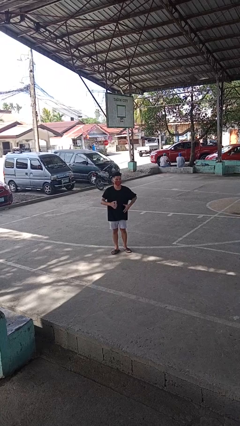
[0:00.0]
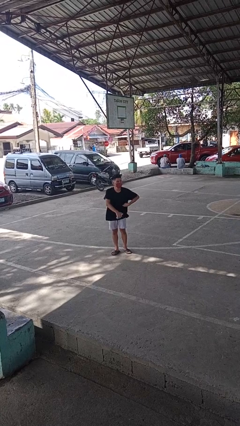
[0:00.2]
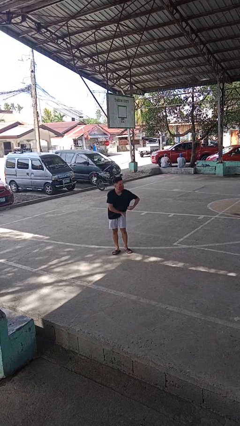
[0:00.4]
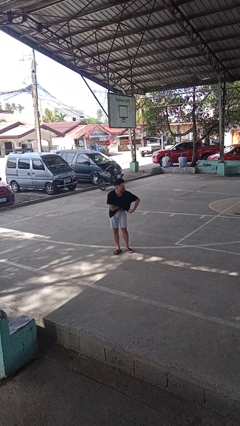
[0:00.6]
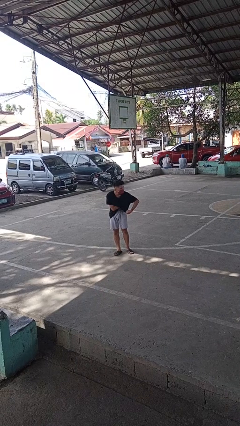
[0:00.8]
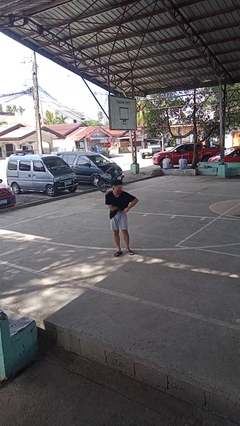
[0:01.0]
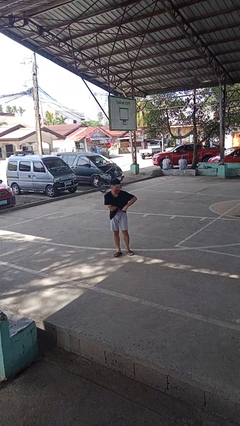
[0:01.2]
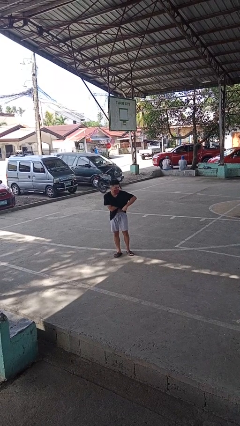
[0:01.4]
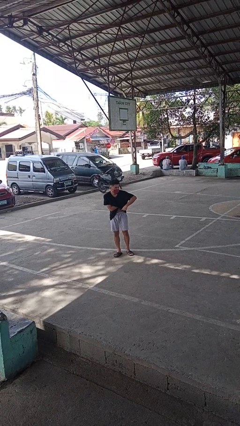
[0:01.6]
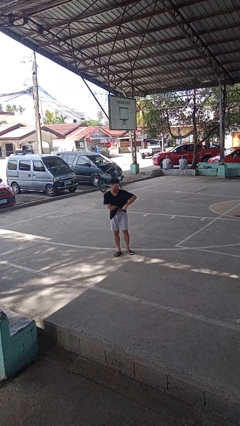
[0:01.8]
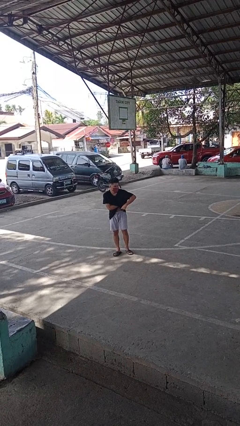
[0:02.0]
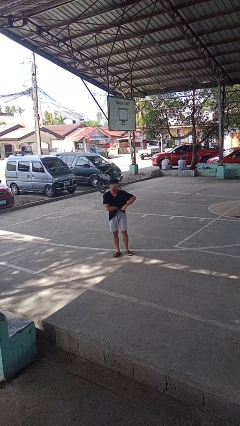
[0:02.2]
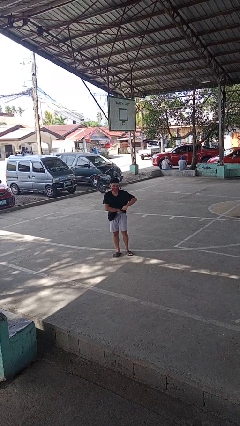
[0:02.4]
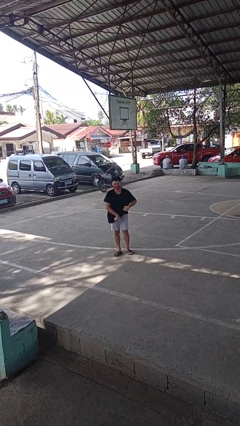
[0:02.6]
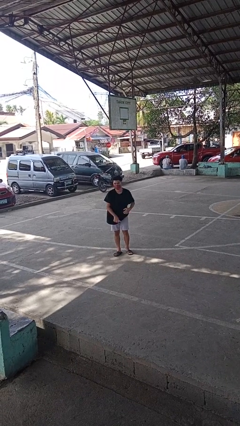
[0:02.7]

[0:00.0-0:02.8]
person applies deodorant

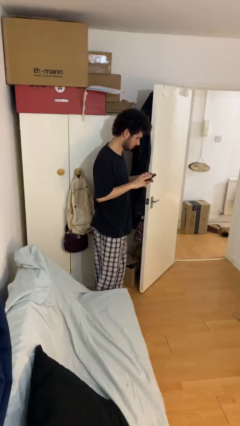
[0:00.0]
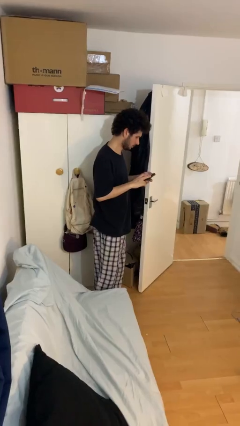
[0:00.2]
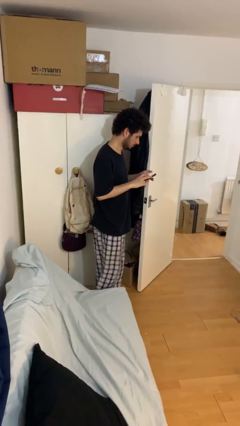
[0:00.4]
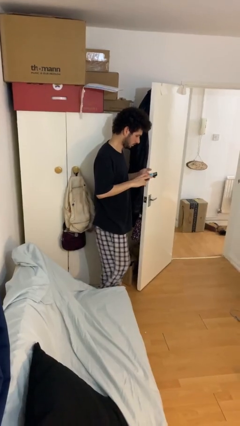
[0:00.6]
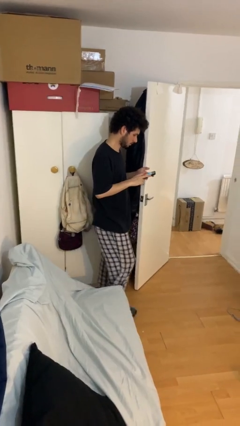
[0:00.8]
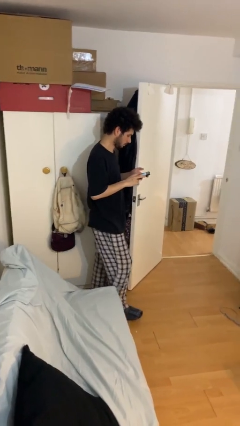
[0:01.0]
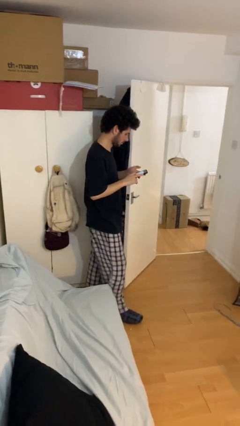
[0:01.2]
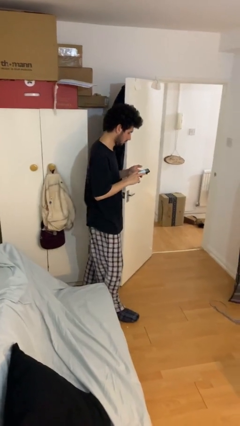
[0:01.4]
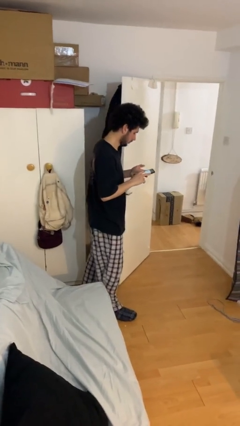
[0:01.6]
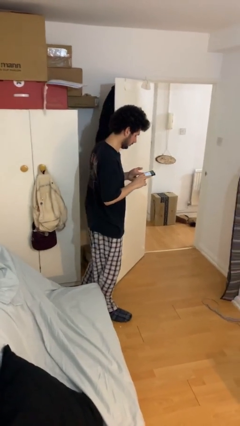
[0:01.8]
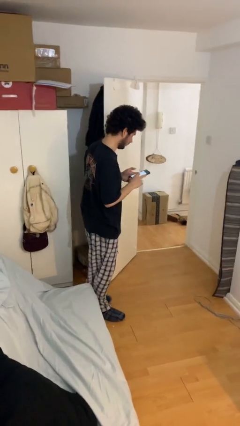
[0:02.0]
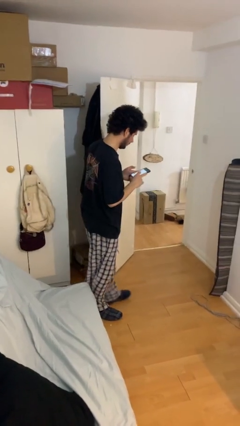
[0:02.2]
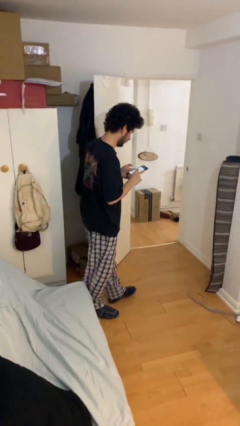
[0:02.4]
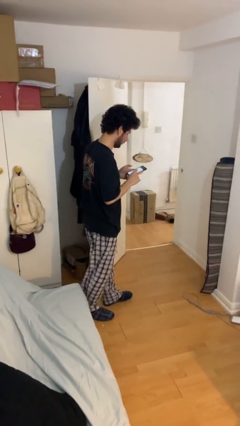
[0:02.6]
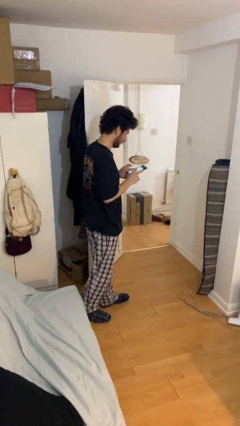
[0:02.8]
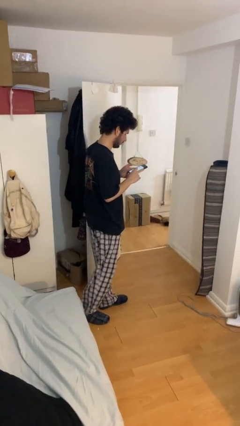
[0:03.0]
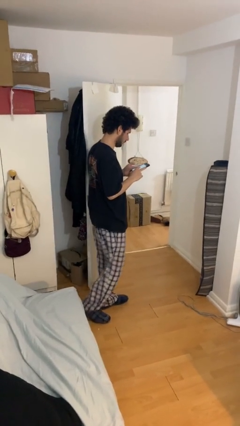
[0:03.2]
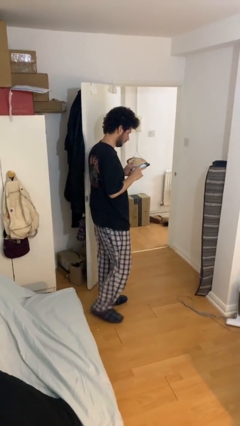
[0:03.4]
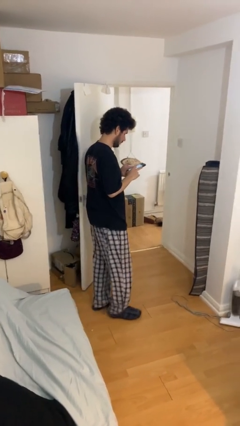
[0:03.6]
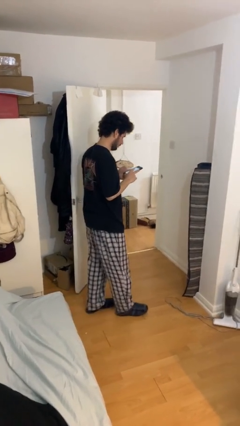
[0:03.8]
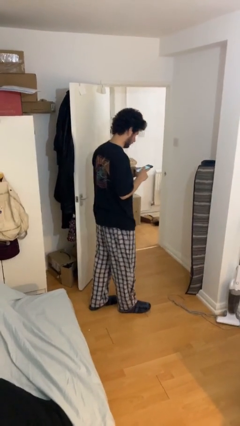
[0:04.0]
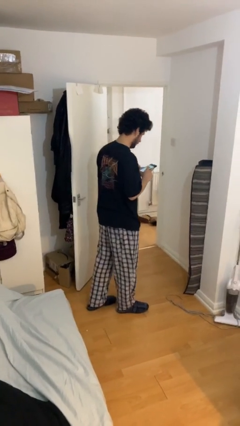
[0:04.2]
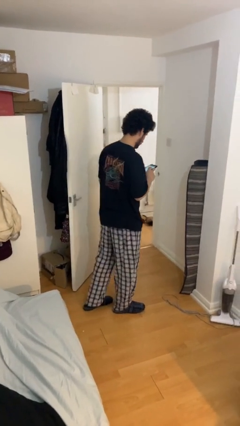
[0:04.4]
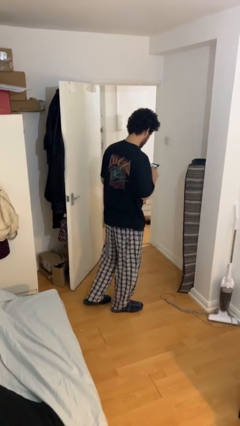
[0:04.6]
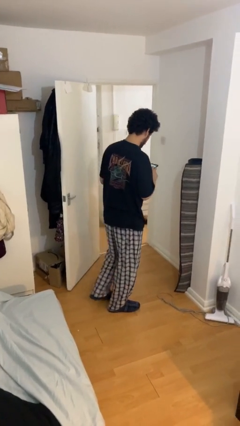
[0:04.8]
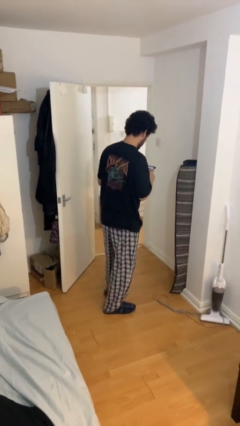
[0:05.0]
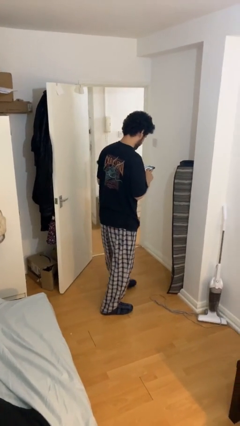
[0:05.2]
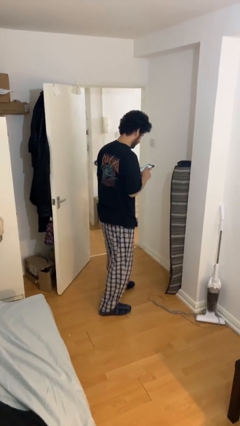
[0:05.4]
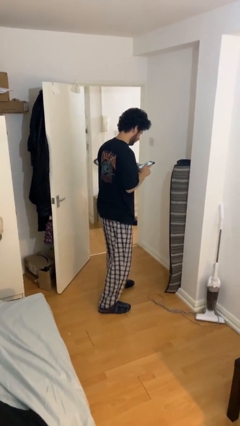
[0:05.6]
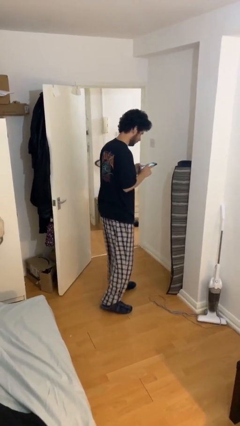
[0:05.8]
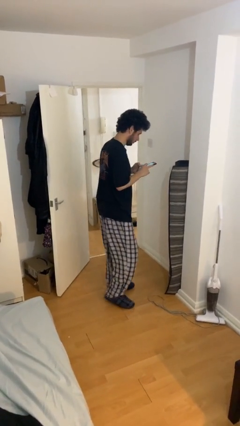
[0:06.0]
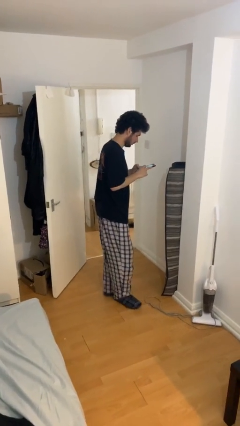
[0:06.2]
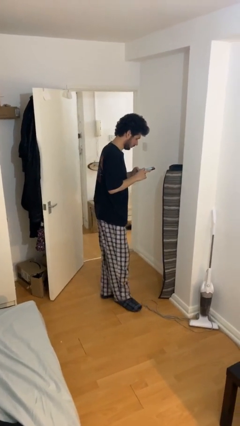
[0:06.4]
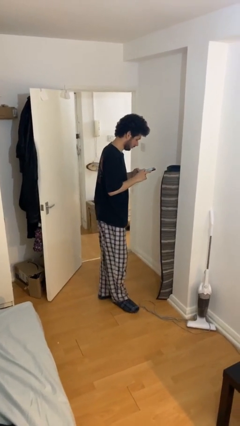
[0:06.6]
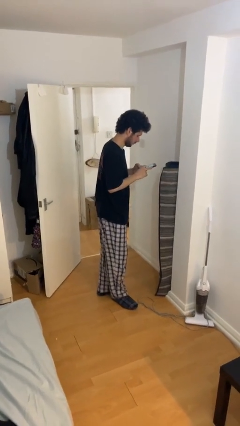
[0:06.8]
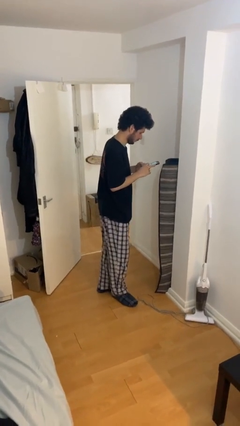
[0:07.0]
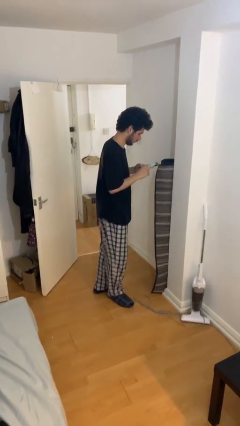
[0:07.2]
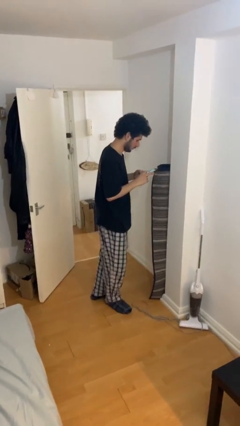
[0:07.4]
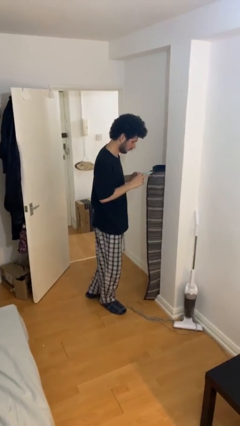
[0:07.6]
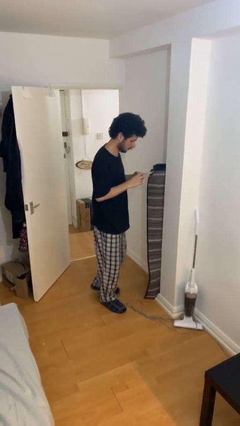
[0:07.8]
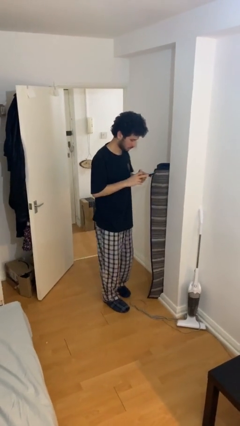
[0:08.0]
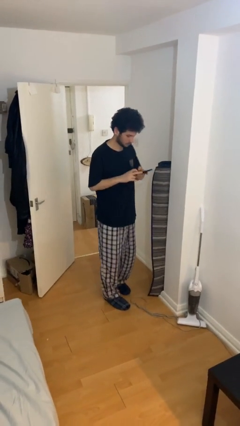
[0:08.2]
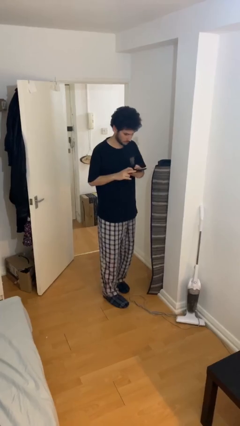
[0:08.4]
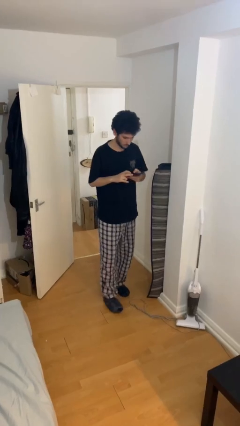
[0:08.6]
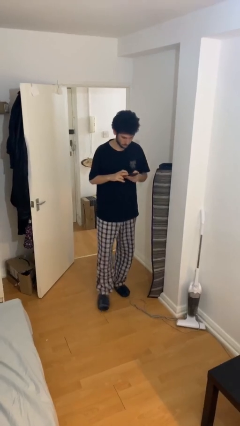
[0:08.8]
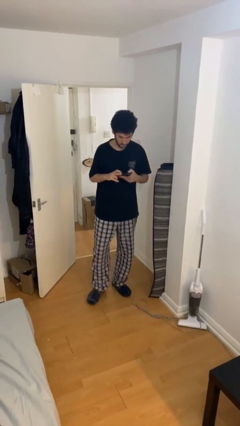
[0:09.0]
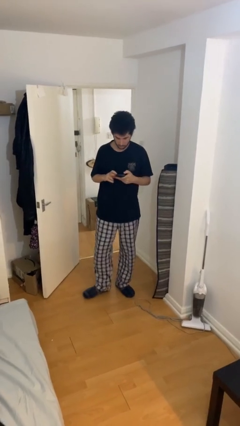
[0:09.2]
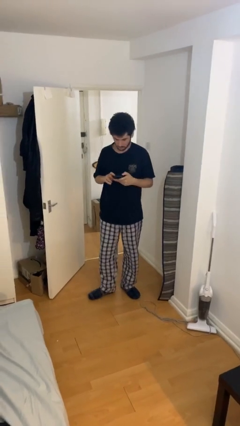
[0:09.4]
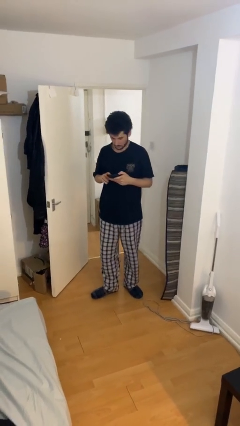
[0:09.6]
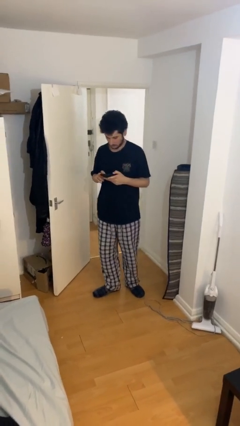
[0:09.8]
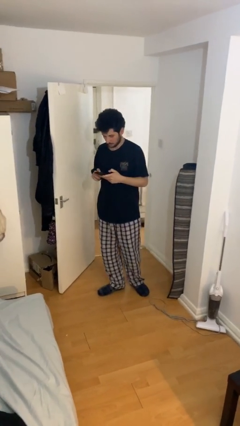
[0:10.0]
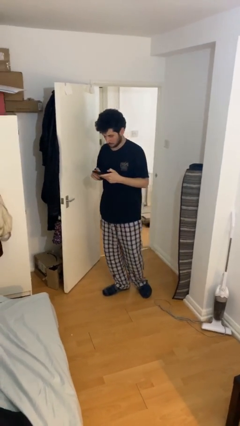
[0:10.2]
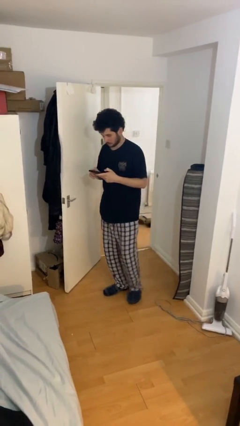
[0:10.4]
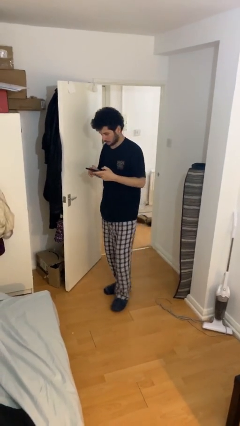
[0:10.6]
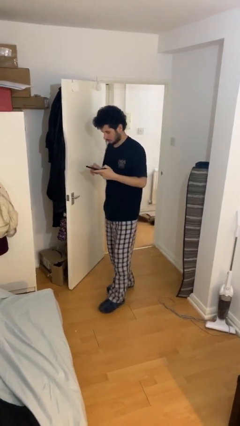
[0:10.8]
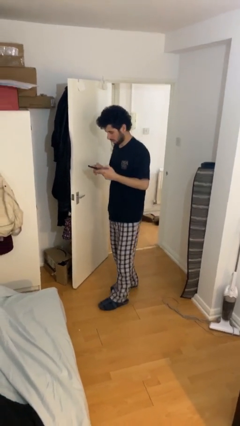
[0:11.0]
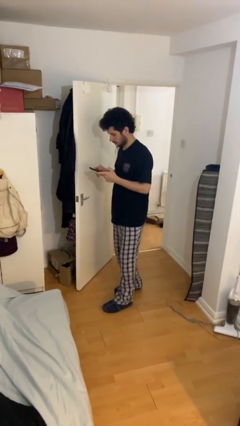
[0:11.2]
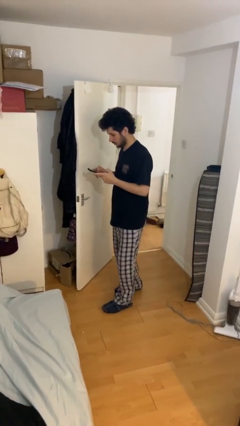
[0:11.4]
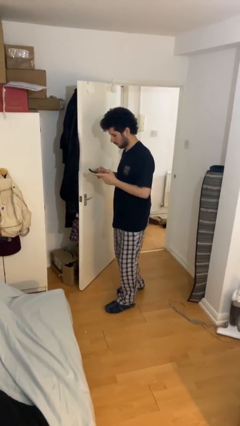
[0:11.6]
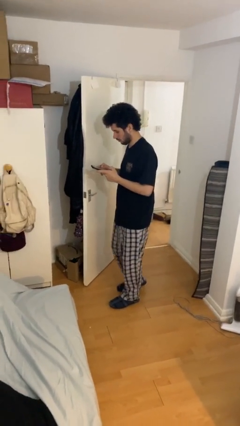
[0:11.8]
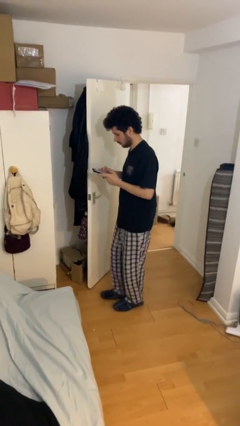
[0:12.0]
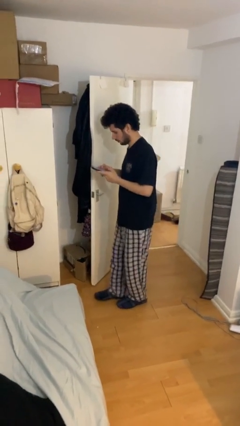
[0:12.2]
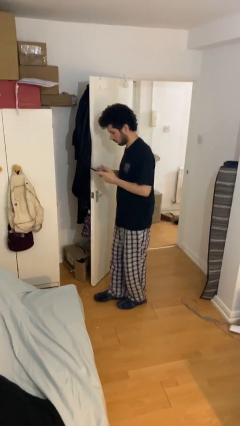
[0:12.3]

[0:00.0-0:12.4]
person texts on phone

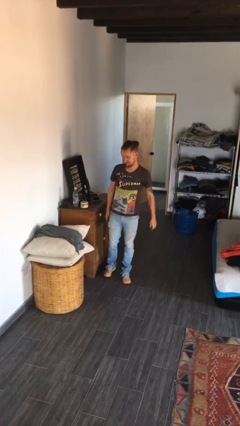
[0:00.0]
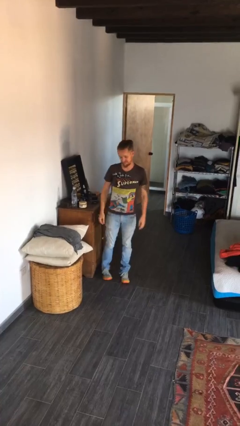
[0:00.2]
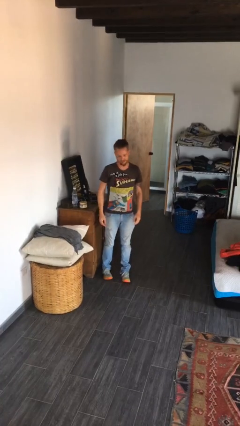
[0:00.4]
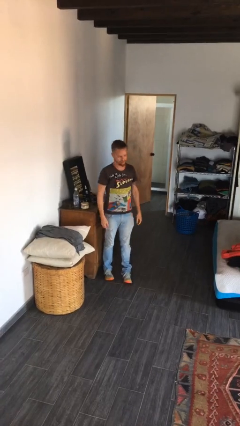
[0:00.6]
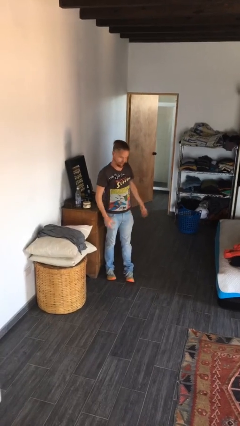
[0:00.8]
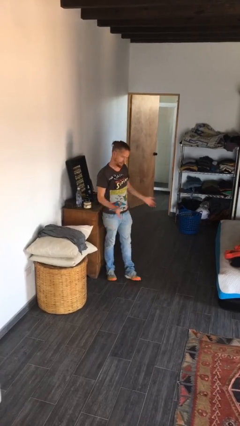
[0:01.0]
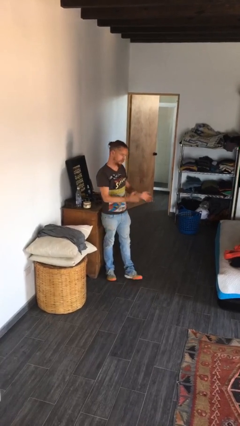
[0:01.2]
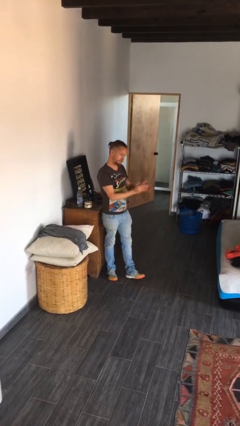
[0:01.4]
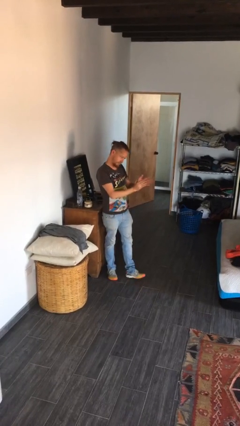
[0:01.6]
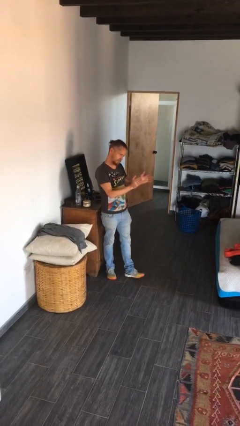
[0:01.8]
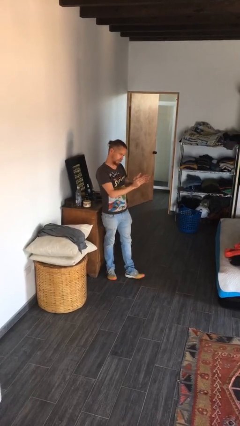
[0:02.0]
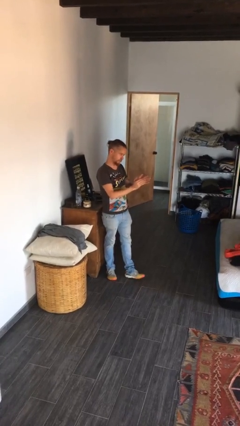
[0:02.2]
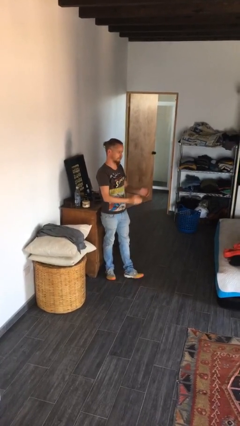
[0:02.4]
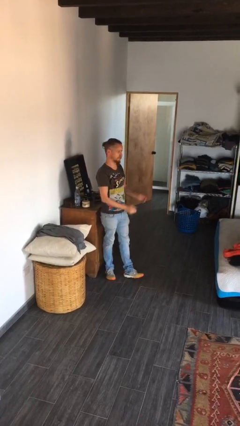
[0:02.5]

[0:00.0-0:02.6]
person claps hands
